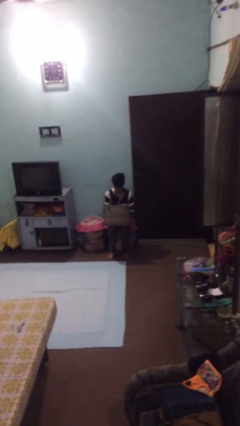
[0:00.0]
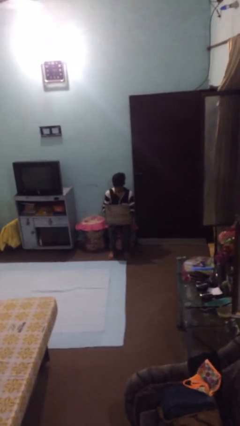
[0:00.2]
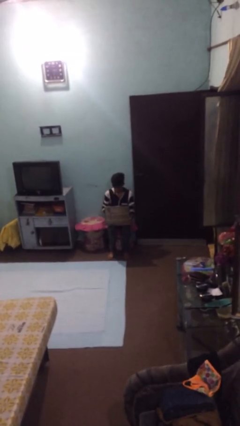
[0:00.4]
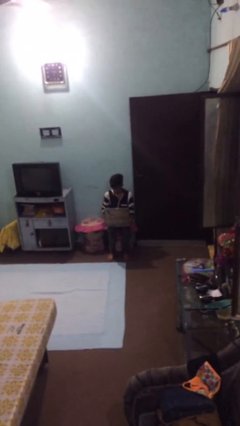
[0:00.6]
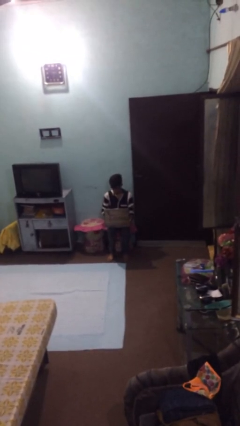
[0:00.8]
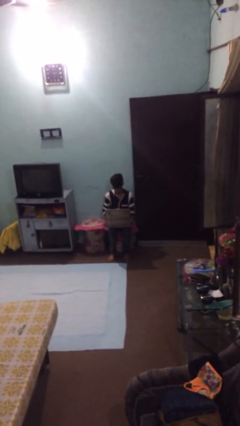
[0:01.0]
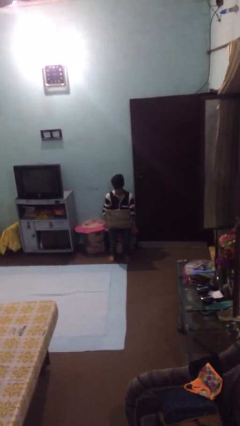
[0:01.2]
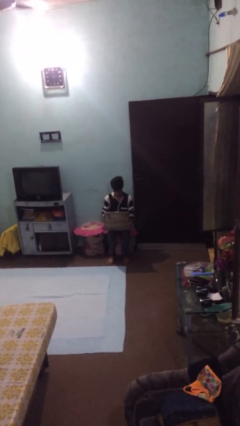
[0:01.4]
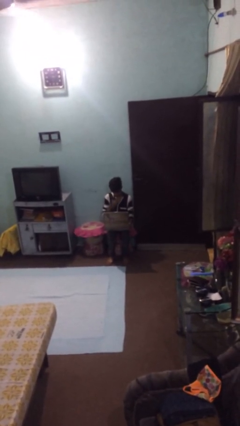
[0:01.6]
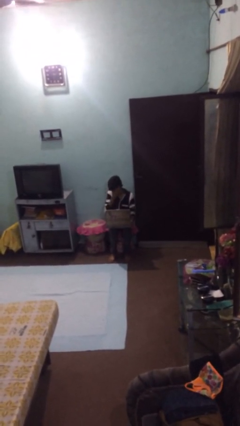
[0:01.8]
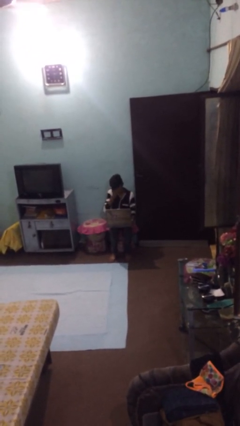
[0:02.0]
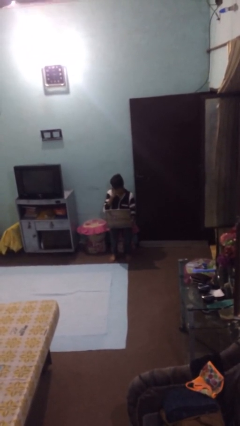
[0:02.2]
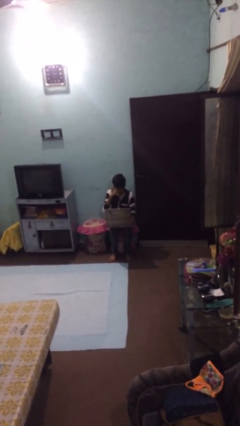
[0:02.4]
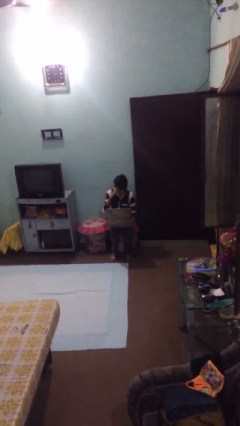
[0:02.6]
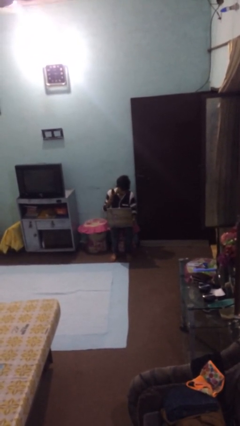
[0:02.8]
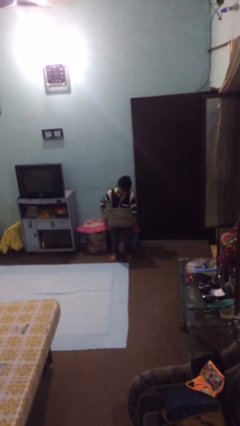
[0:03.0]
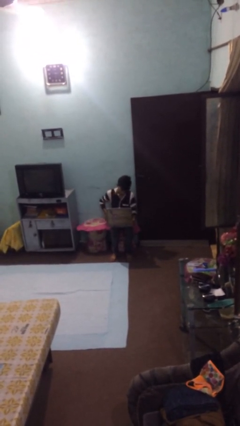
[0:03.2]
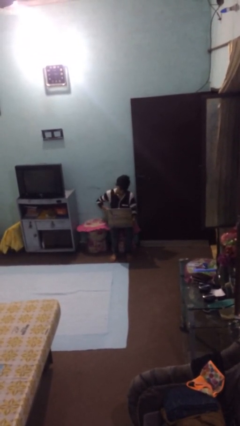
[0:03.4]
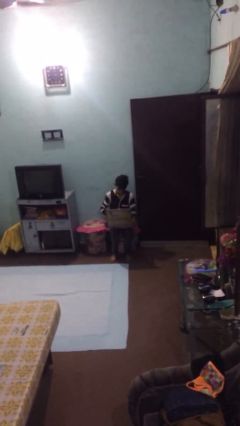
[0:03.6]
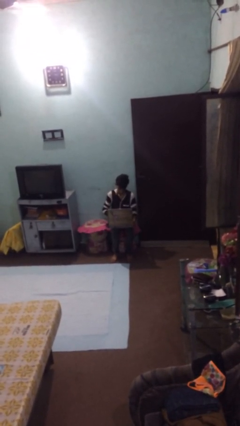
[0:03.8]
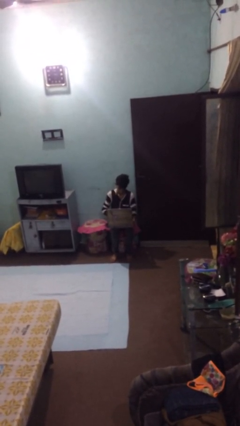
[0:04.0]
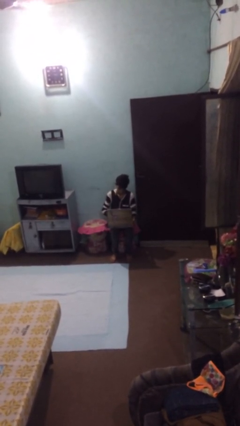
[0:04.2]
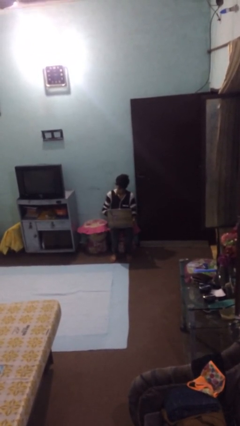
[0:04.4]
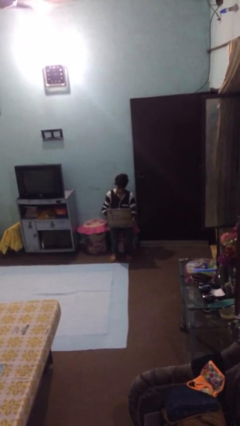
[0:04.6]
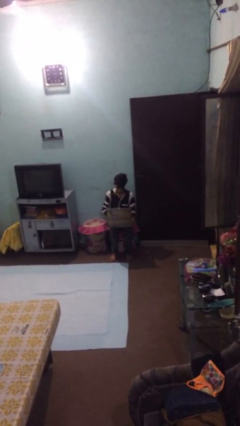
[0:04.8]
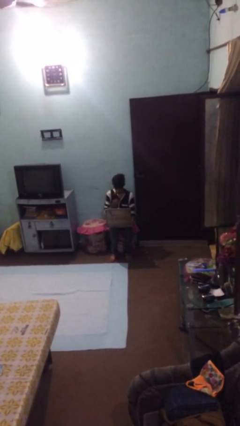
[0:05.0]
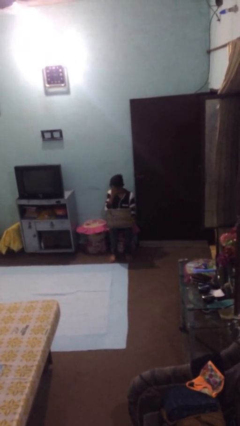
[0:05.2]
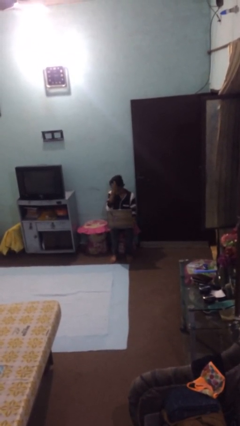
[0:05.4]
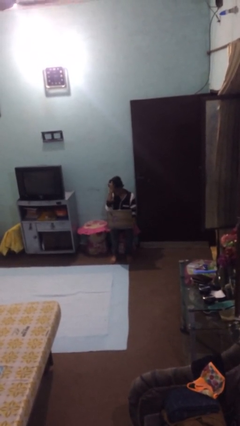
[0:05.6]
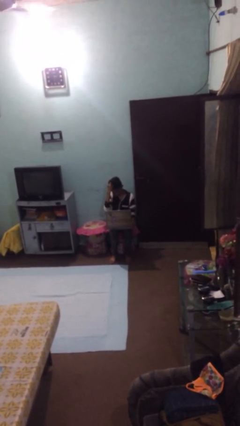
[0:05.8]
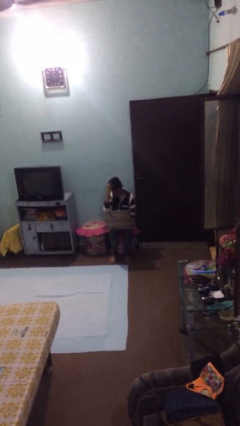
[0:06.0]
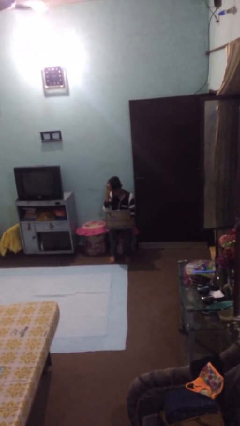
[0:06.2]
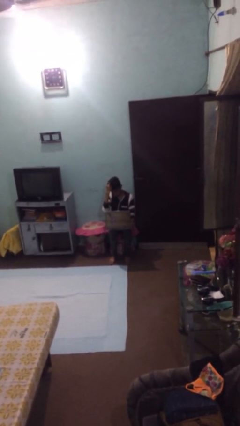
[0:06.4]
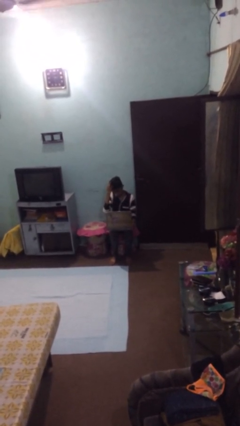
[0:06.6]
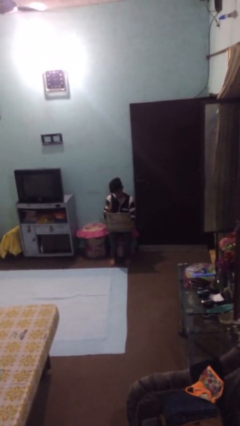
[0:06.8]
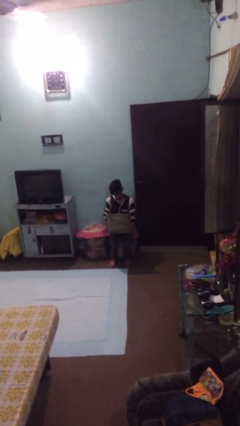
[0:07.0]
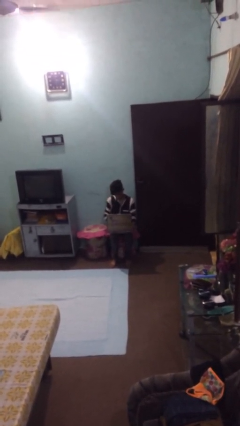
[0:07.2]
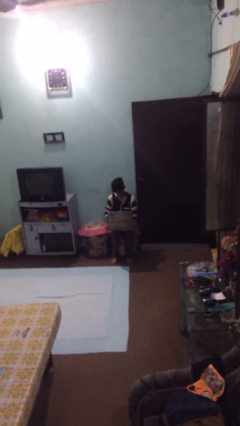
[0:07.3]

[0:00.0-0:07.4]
person interacts with laptop

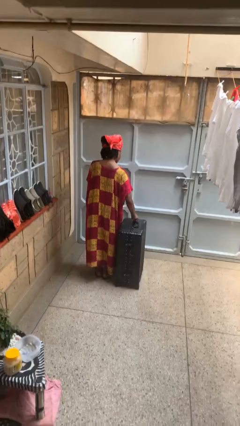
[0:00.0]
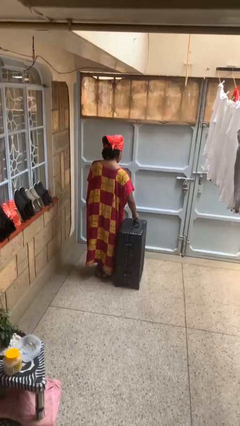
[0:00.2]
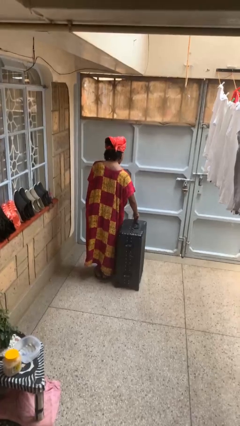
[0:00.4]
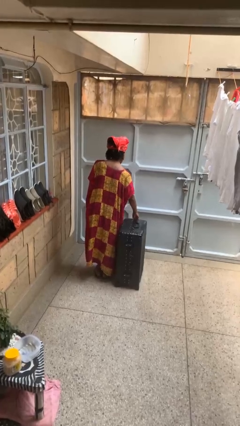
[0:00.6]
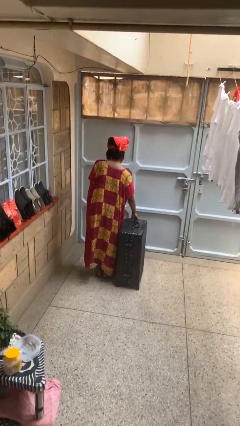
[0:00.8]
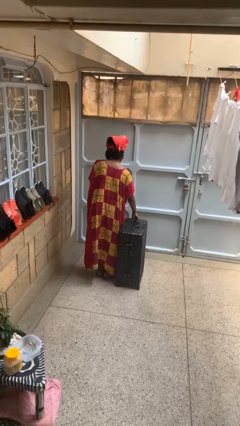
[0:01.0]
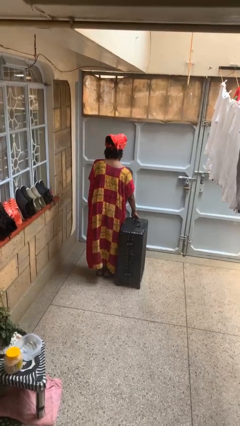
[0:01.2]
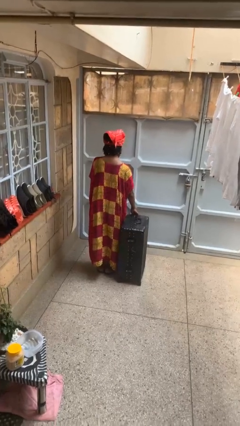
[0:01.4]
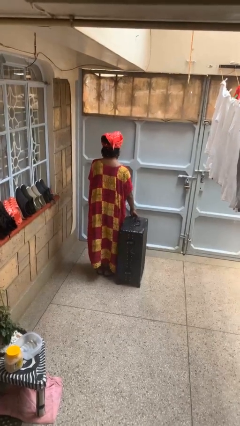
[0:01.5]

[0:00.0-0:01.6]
person closes suitcase

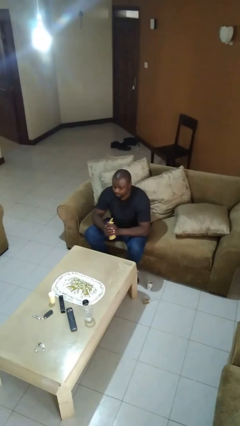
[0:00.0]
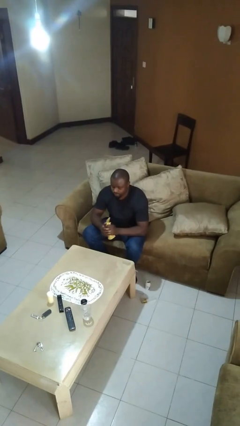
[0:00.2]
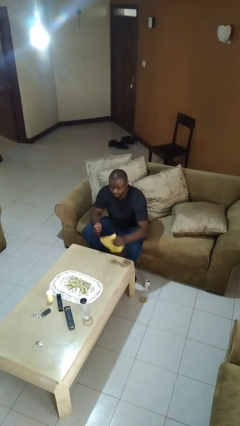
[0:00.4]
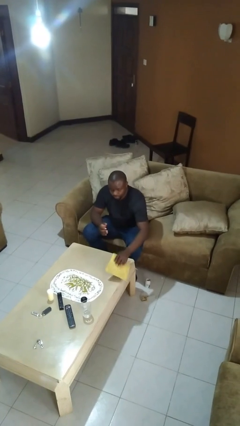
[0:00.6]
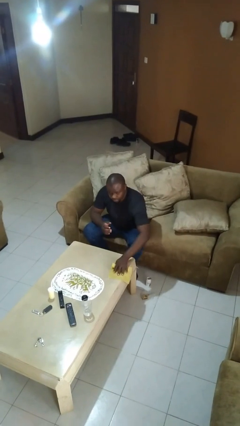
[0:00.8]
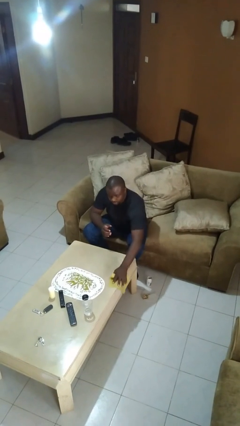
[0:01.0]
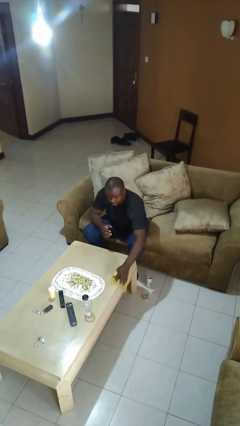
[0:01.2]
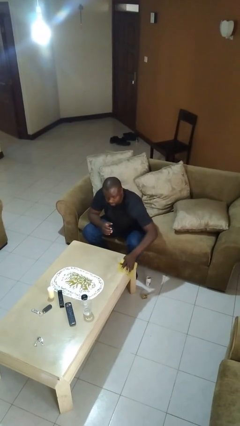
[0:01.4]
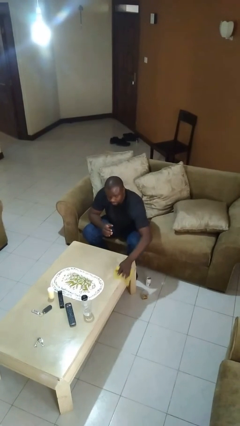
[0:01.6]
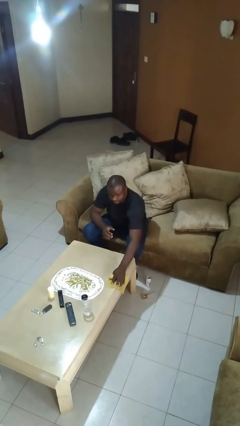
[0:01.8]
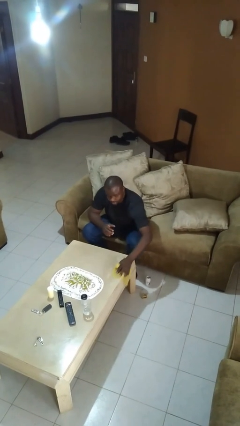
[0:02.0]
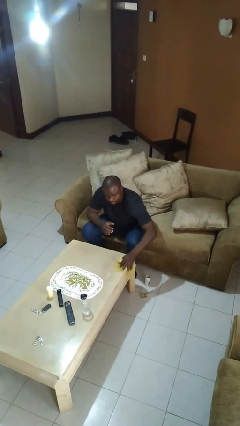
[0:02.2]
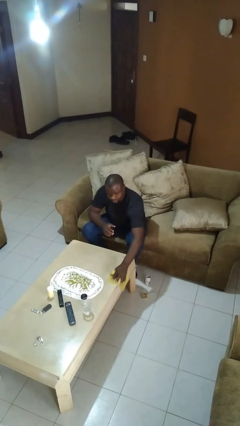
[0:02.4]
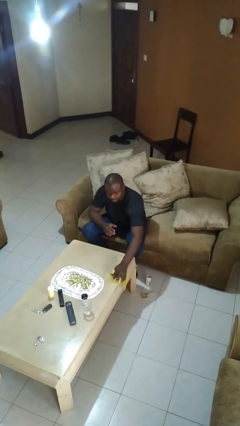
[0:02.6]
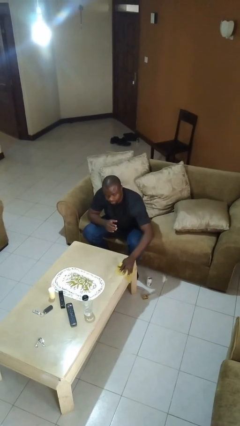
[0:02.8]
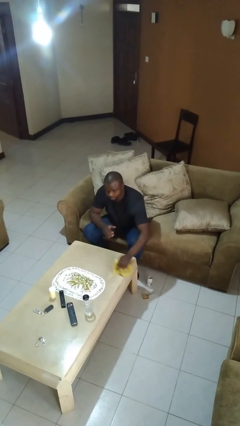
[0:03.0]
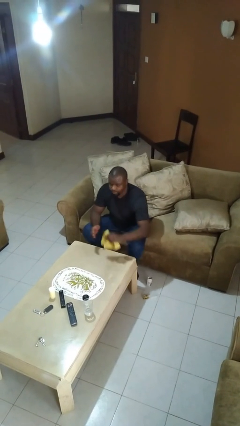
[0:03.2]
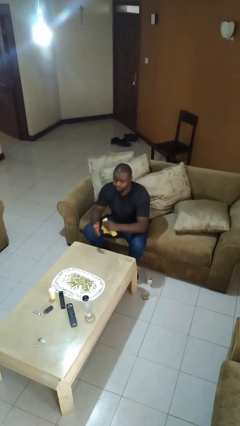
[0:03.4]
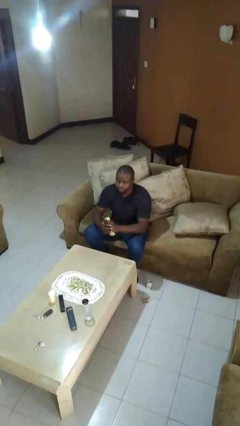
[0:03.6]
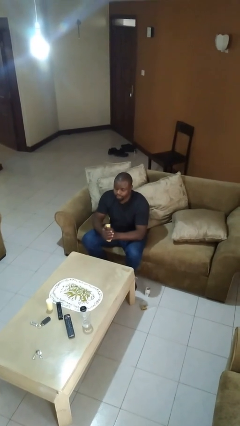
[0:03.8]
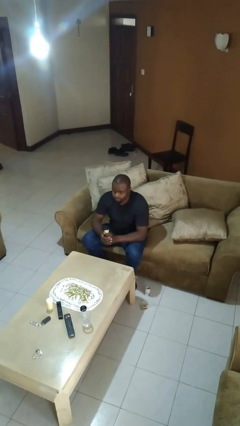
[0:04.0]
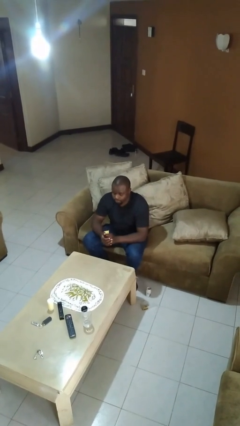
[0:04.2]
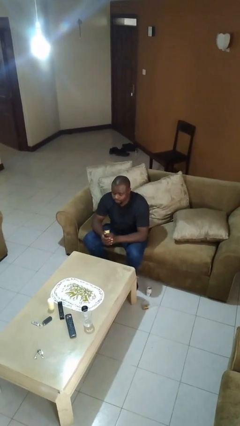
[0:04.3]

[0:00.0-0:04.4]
person cleans table with rag

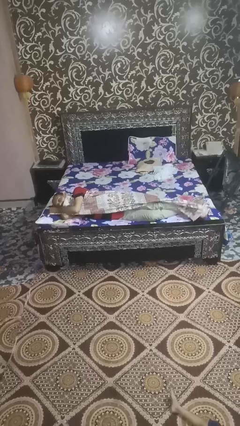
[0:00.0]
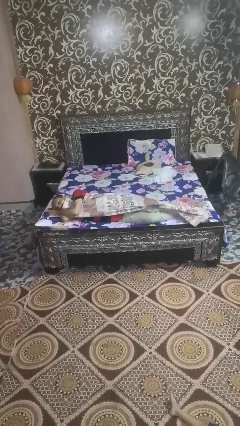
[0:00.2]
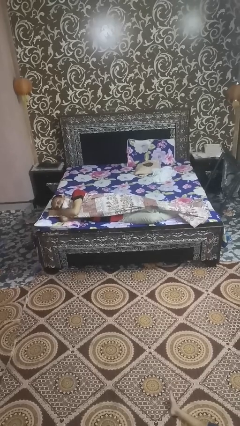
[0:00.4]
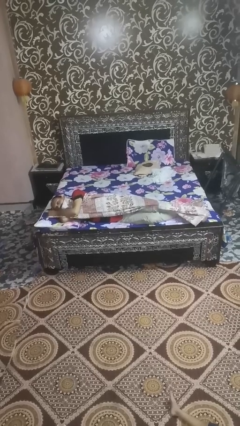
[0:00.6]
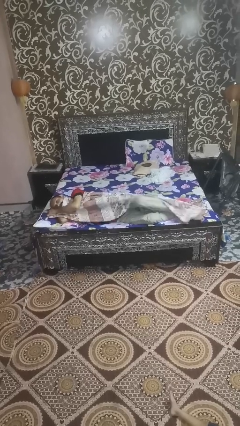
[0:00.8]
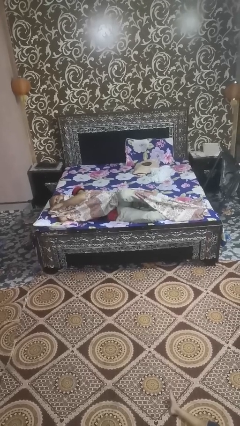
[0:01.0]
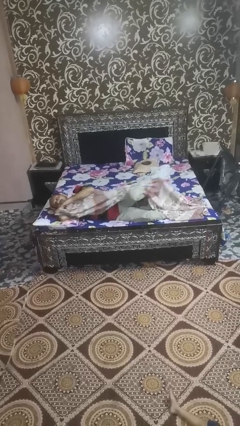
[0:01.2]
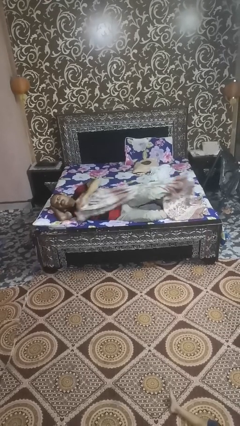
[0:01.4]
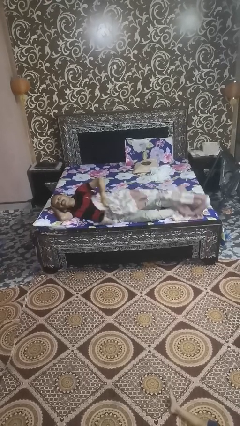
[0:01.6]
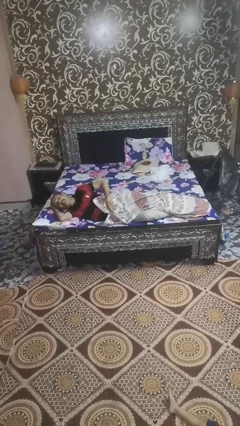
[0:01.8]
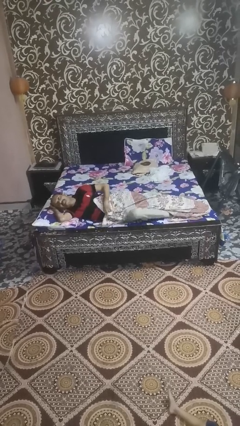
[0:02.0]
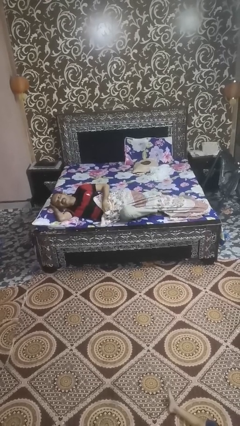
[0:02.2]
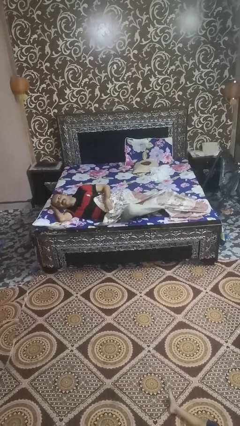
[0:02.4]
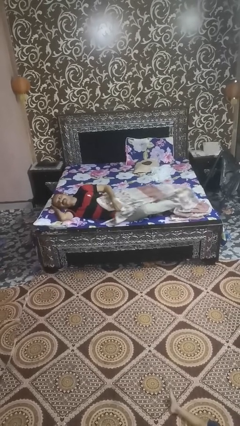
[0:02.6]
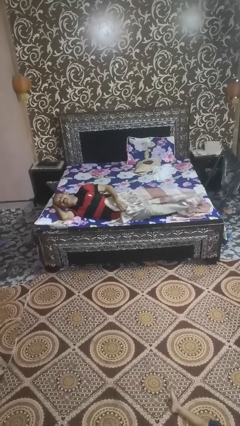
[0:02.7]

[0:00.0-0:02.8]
person uncovers with bedsheets

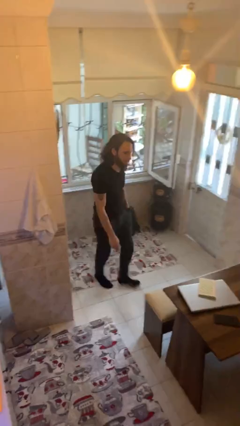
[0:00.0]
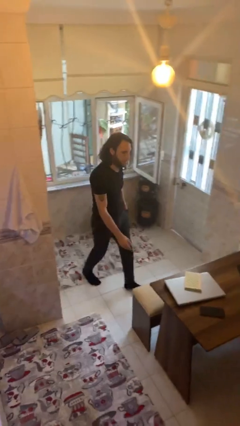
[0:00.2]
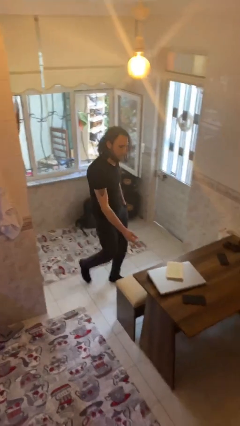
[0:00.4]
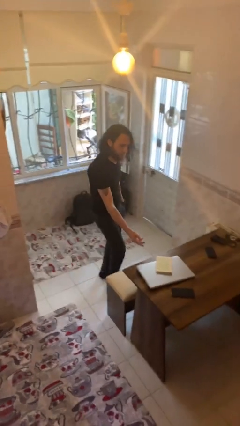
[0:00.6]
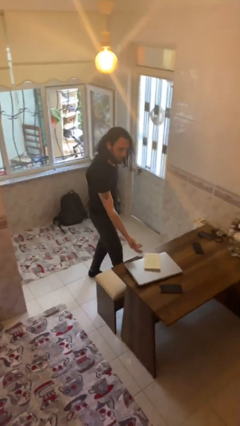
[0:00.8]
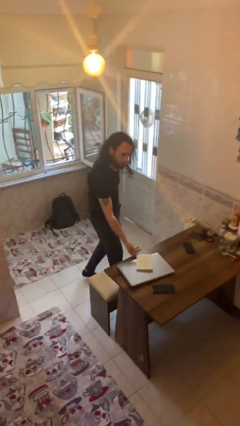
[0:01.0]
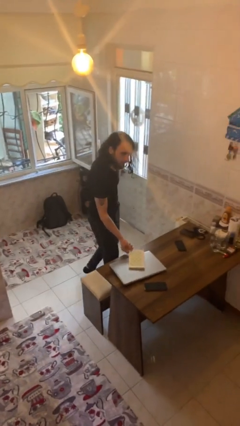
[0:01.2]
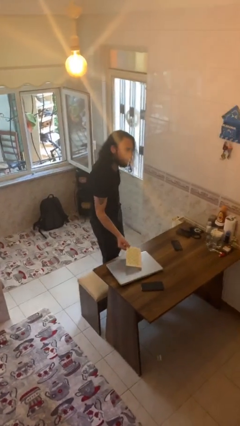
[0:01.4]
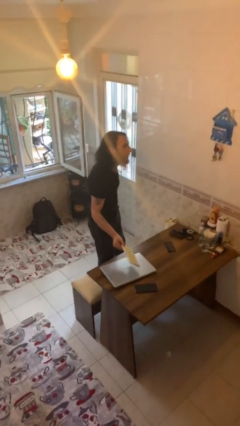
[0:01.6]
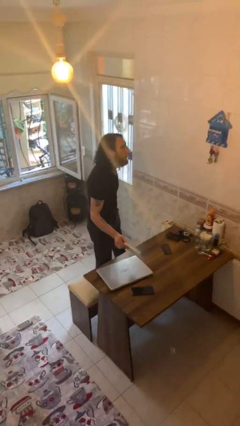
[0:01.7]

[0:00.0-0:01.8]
person picks up object from table
